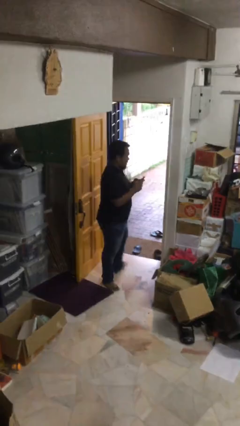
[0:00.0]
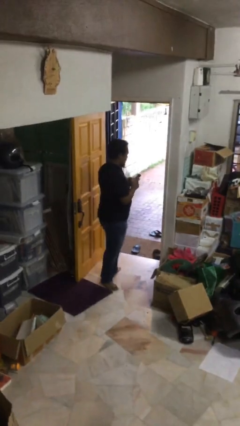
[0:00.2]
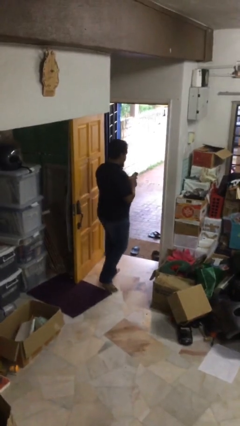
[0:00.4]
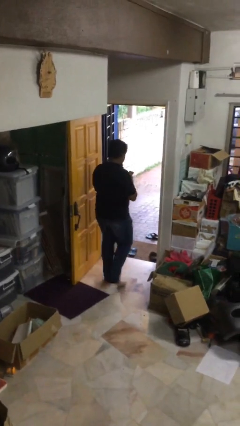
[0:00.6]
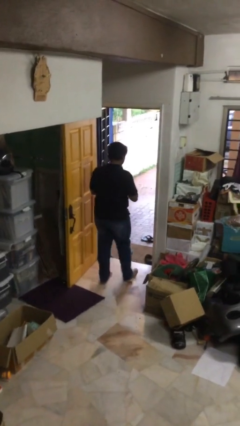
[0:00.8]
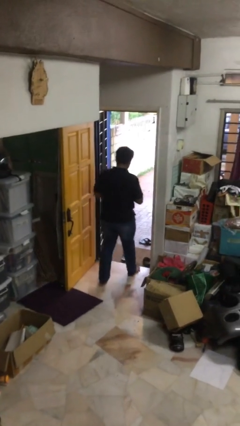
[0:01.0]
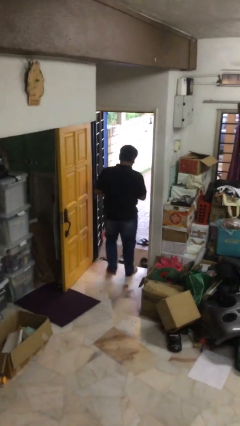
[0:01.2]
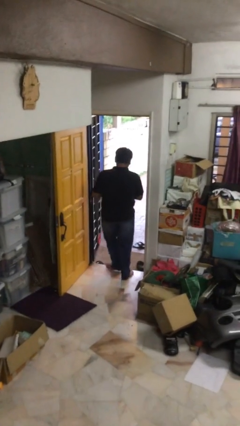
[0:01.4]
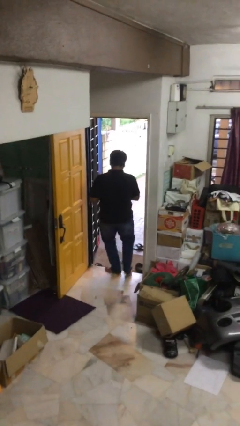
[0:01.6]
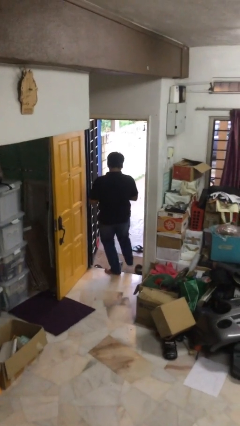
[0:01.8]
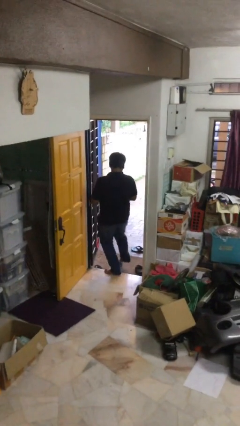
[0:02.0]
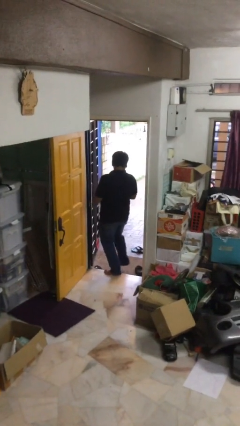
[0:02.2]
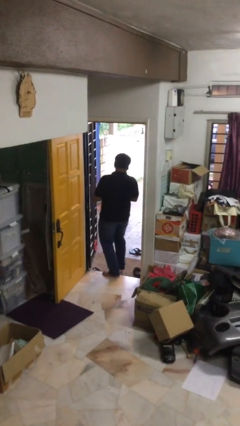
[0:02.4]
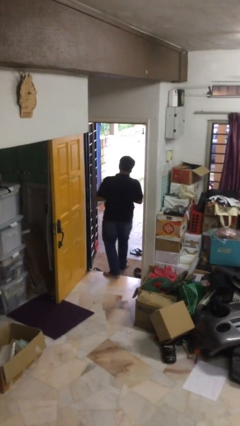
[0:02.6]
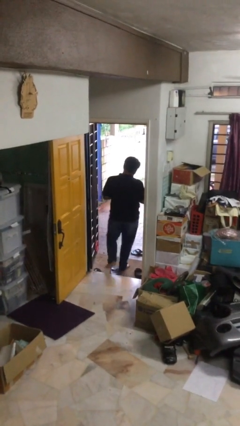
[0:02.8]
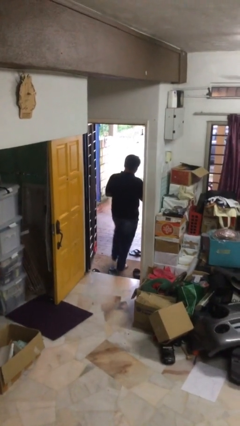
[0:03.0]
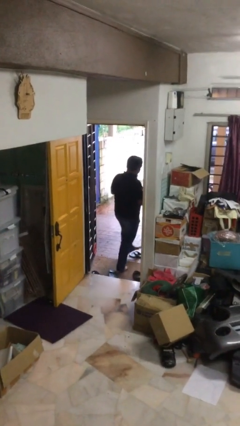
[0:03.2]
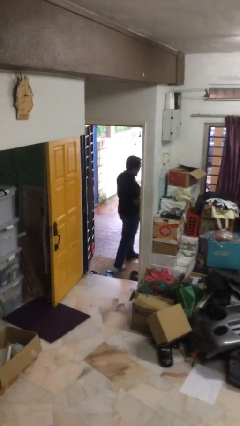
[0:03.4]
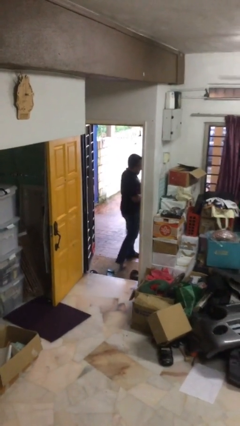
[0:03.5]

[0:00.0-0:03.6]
person exits scene through structure

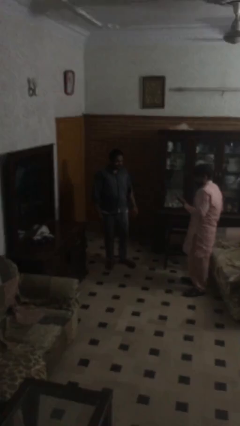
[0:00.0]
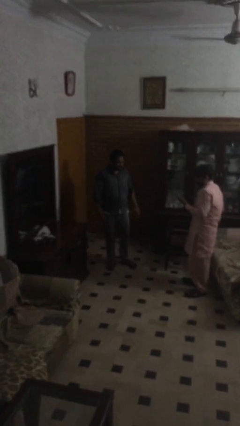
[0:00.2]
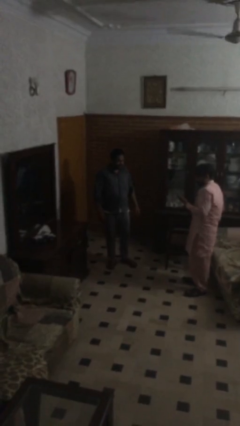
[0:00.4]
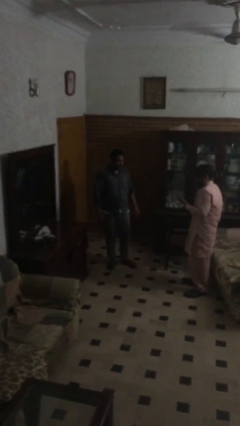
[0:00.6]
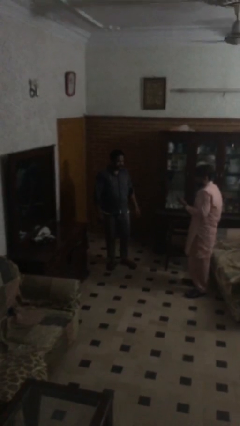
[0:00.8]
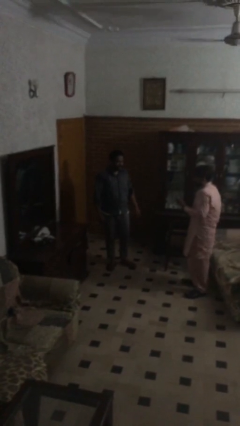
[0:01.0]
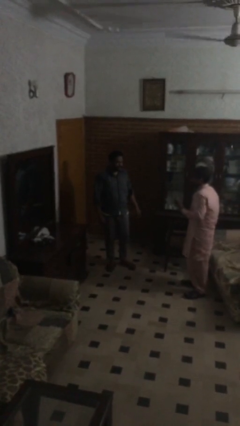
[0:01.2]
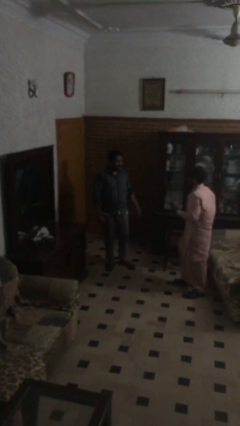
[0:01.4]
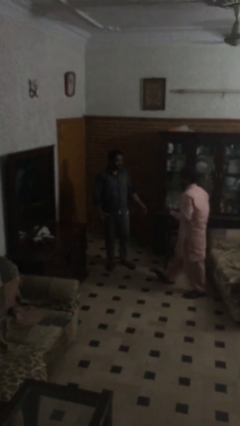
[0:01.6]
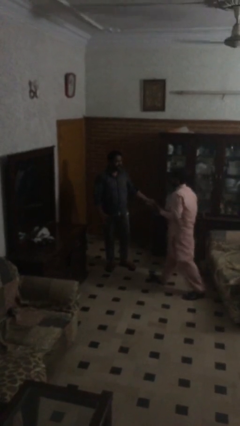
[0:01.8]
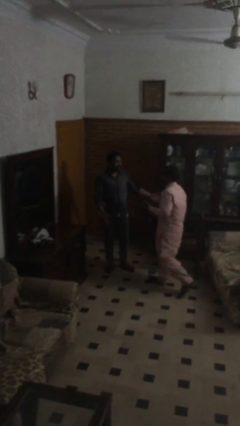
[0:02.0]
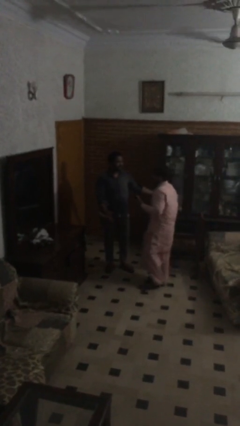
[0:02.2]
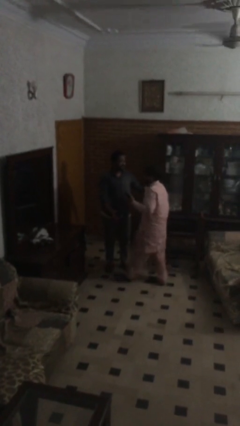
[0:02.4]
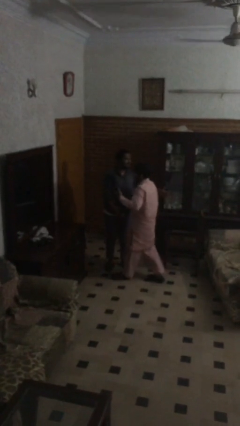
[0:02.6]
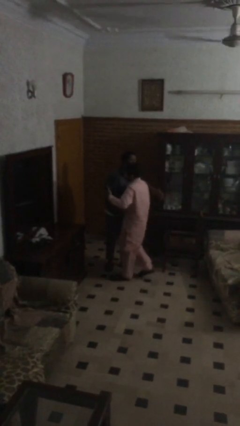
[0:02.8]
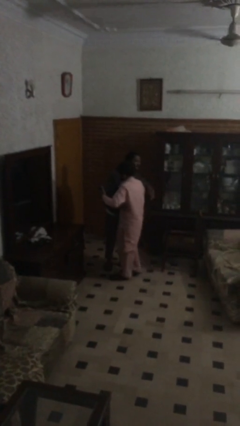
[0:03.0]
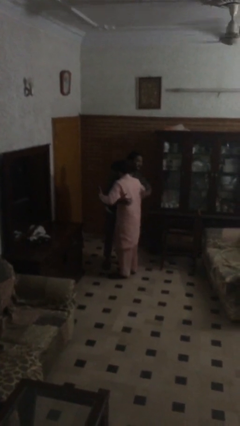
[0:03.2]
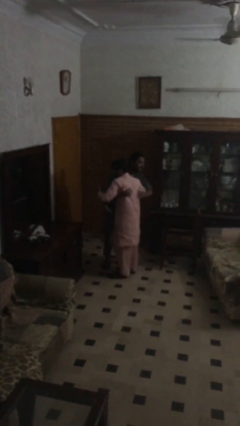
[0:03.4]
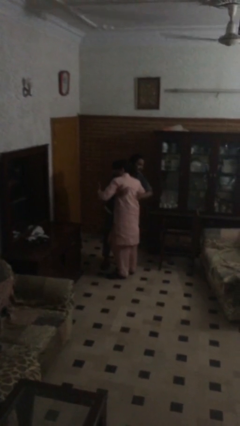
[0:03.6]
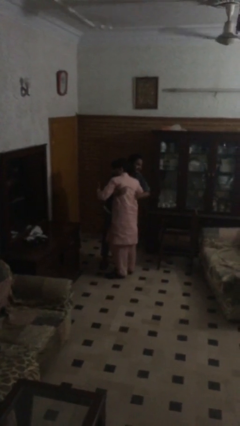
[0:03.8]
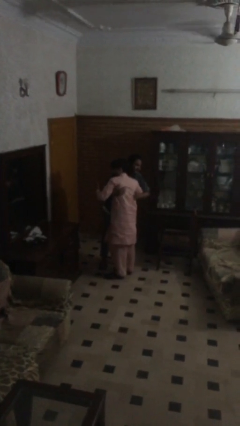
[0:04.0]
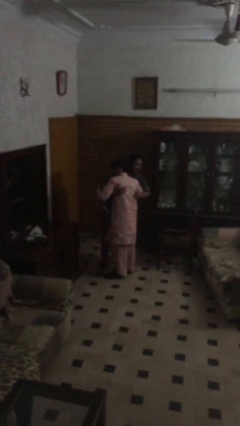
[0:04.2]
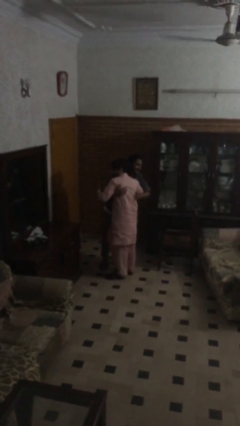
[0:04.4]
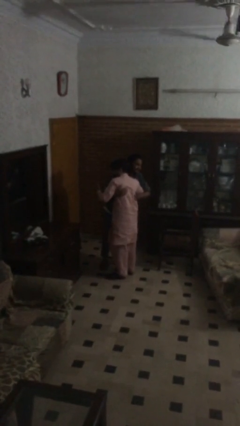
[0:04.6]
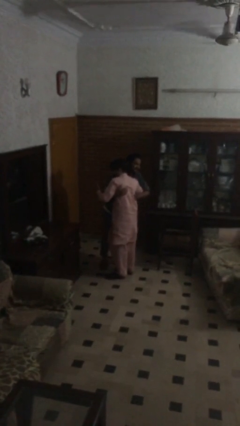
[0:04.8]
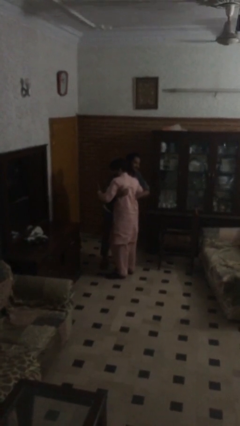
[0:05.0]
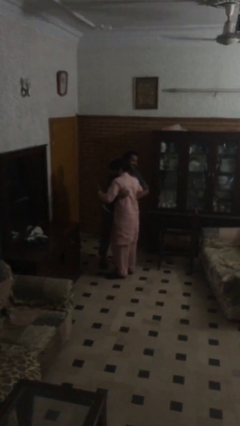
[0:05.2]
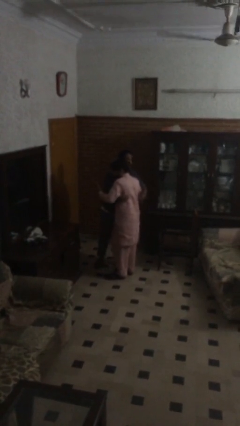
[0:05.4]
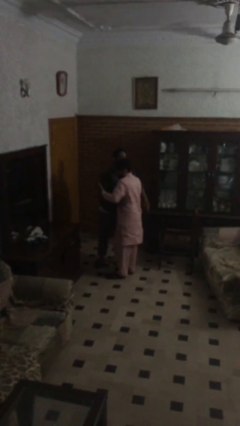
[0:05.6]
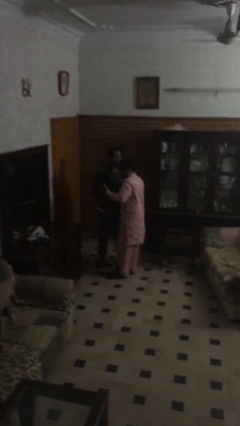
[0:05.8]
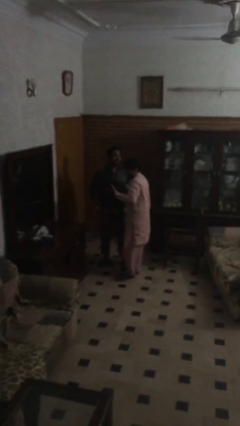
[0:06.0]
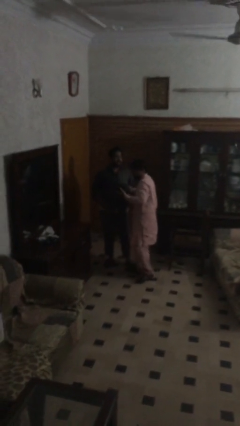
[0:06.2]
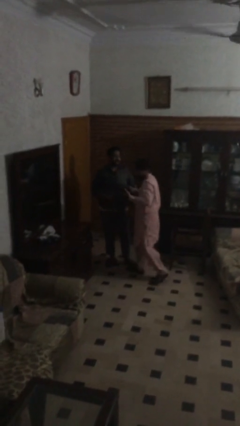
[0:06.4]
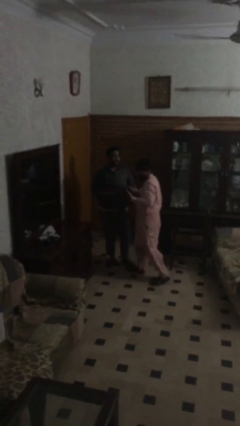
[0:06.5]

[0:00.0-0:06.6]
person embraces person

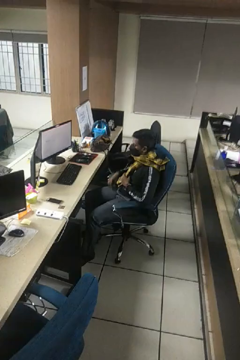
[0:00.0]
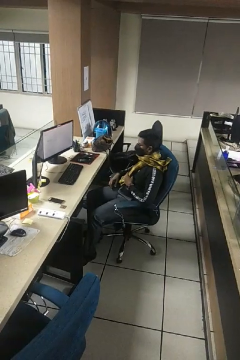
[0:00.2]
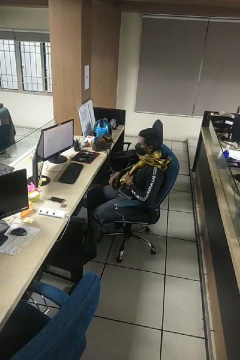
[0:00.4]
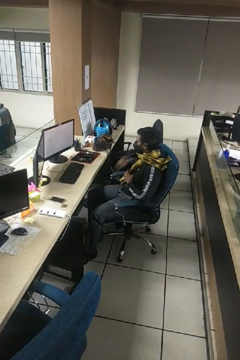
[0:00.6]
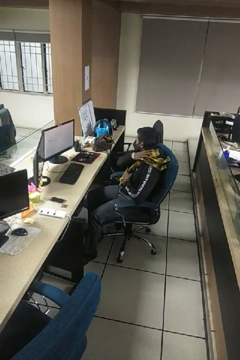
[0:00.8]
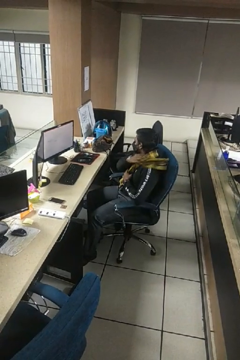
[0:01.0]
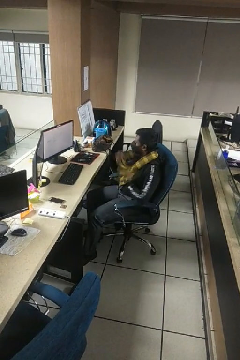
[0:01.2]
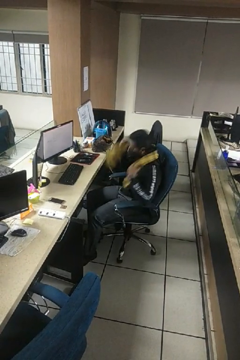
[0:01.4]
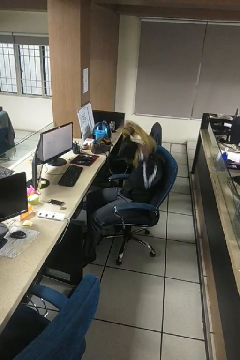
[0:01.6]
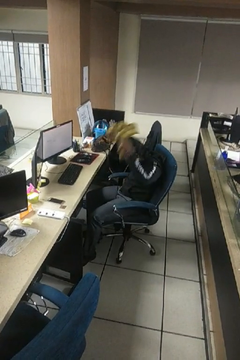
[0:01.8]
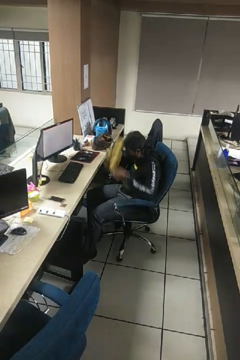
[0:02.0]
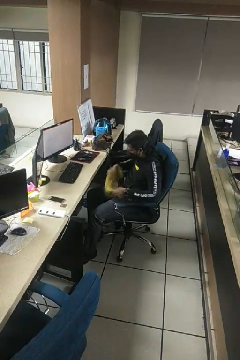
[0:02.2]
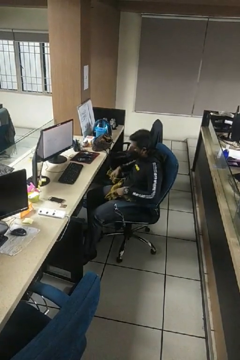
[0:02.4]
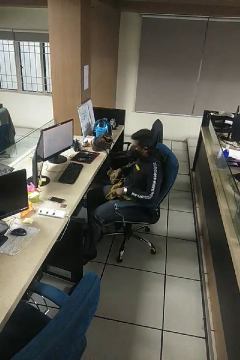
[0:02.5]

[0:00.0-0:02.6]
person takes off scarf

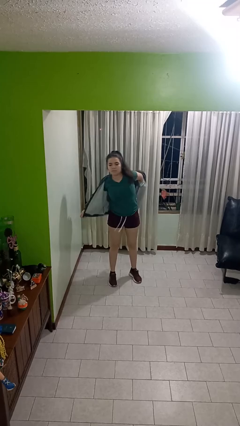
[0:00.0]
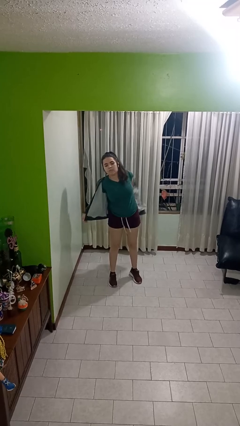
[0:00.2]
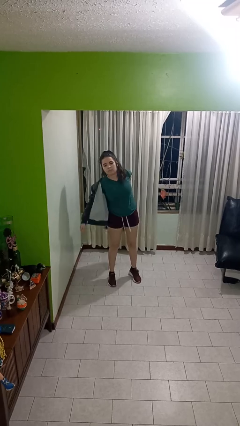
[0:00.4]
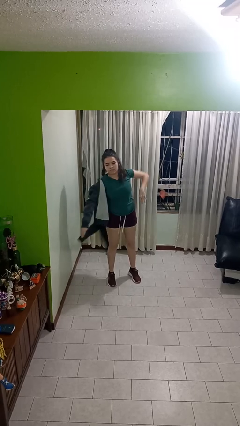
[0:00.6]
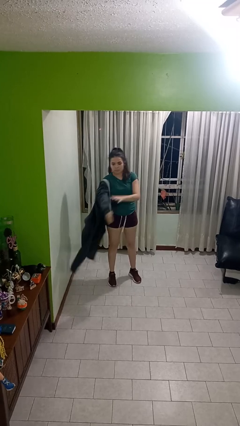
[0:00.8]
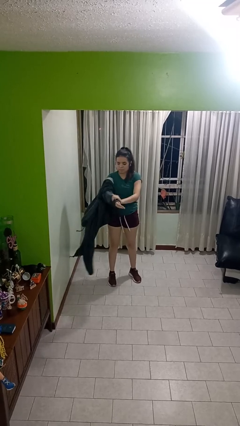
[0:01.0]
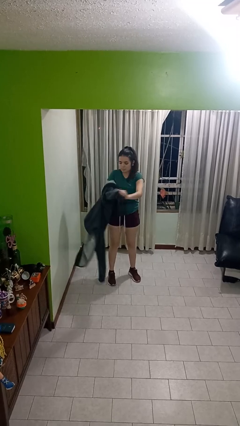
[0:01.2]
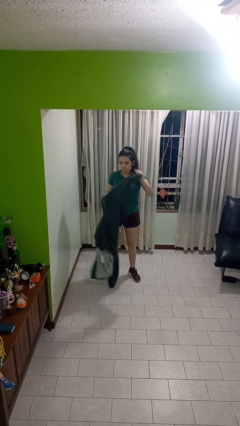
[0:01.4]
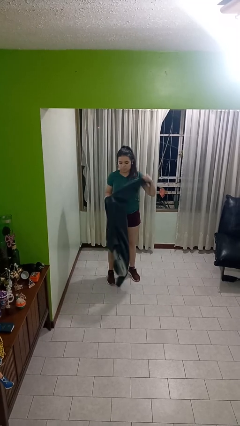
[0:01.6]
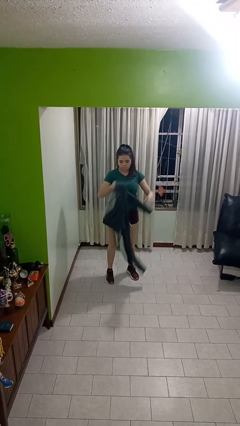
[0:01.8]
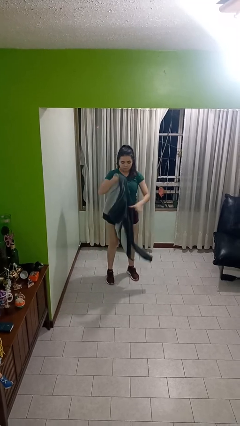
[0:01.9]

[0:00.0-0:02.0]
person takes off jacket

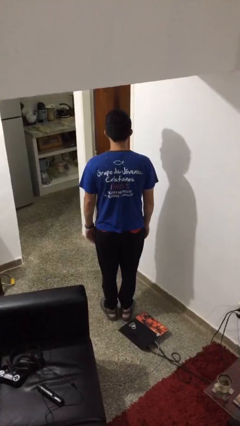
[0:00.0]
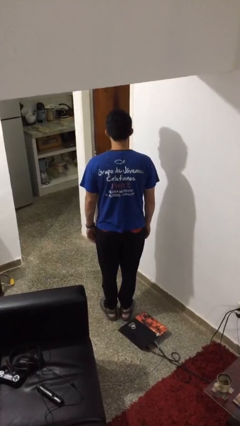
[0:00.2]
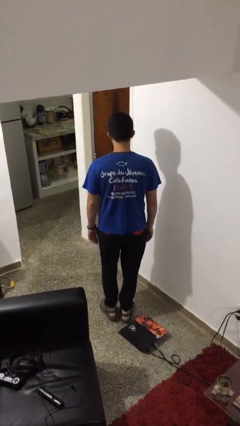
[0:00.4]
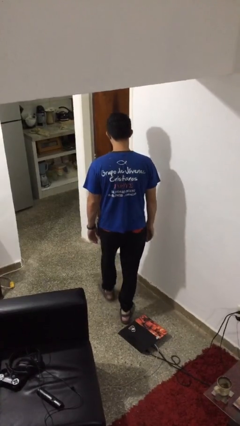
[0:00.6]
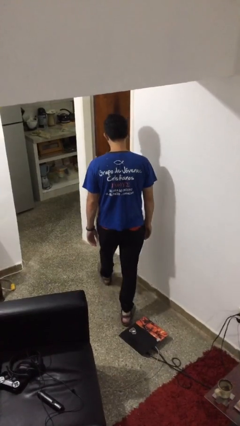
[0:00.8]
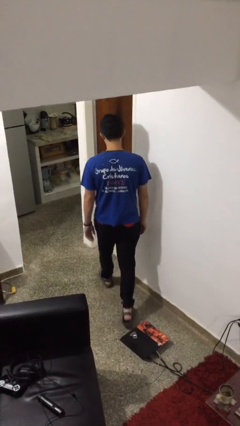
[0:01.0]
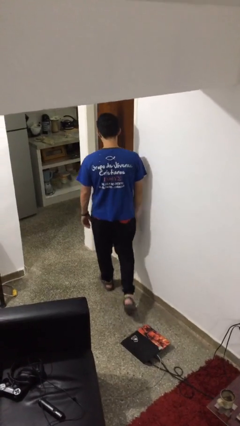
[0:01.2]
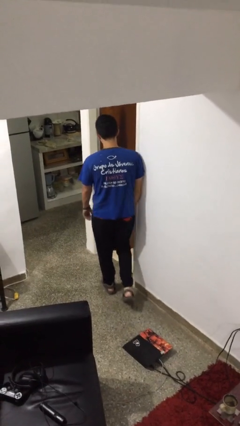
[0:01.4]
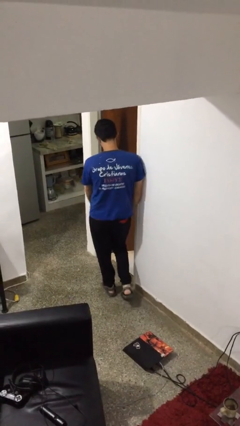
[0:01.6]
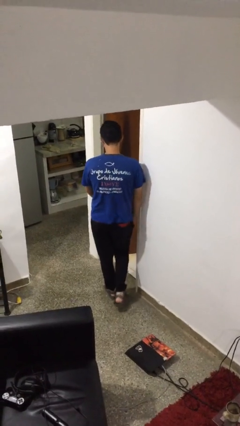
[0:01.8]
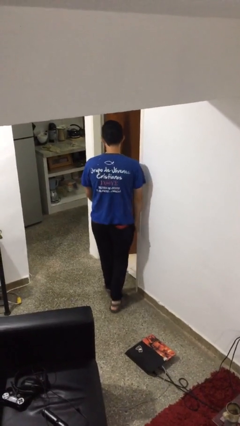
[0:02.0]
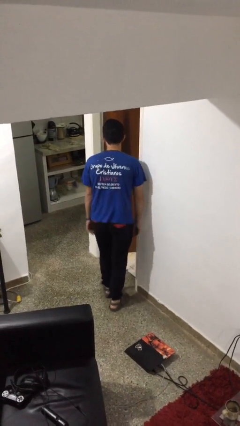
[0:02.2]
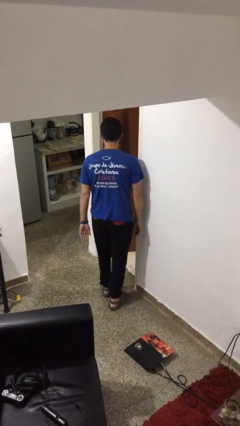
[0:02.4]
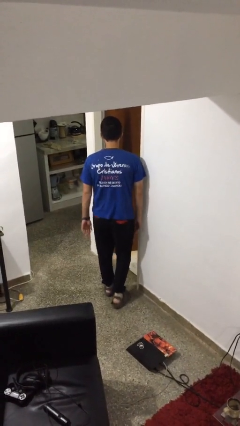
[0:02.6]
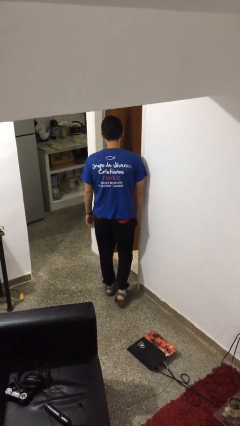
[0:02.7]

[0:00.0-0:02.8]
person bumps into wall

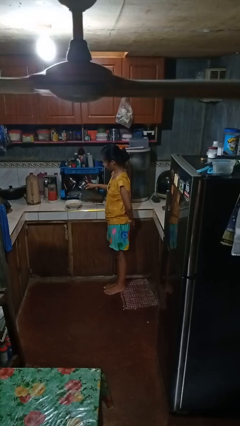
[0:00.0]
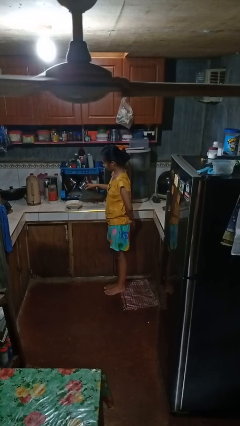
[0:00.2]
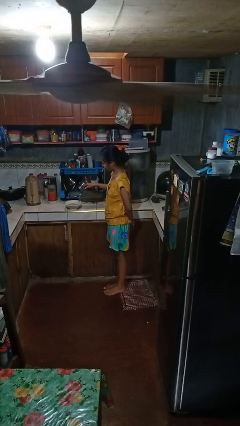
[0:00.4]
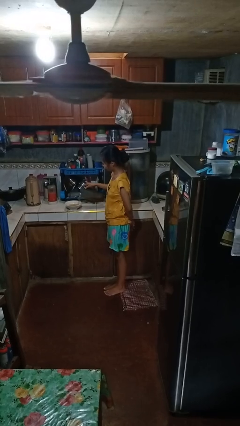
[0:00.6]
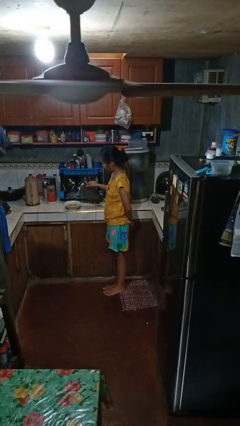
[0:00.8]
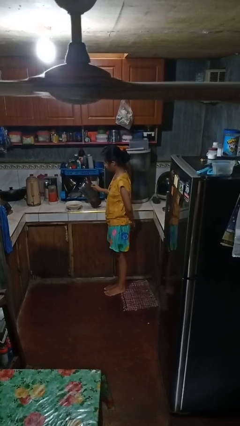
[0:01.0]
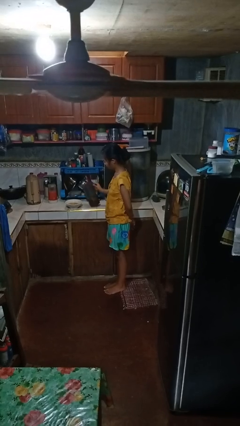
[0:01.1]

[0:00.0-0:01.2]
person pours into bowl
